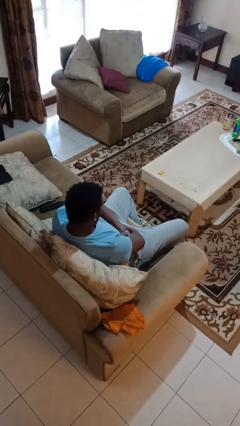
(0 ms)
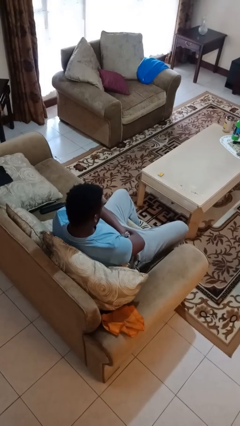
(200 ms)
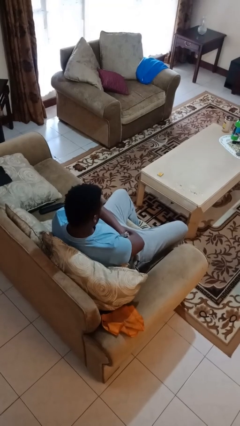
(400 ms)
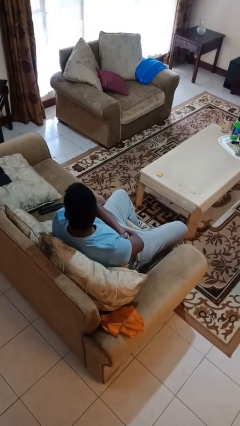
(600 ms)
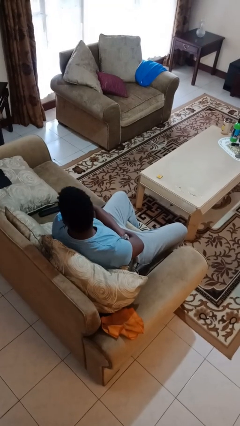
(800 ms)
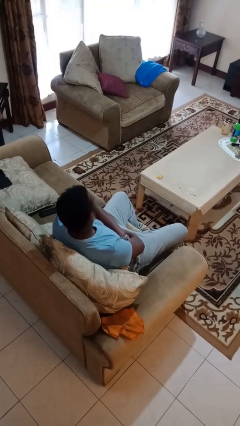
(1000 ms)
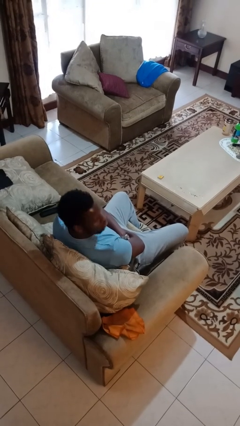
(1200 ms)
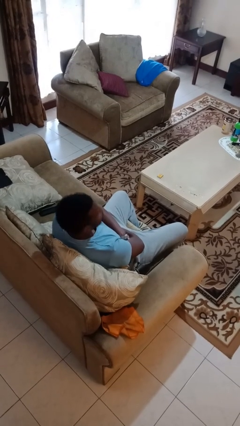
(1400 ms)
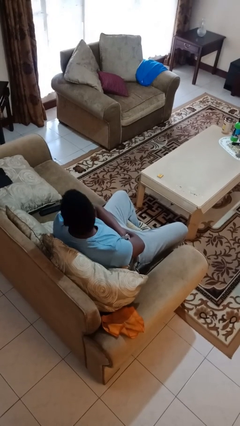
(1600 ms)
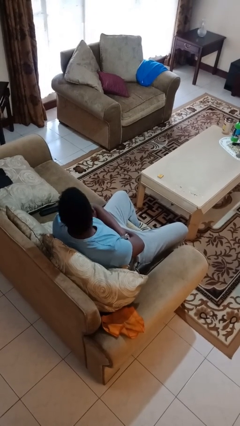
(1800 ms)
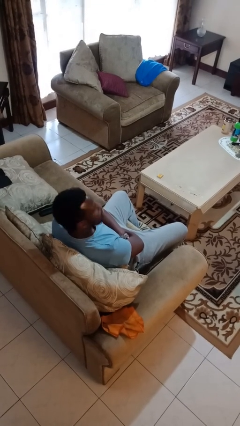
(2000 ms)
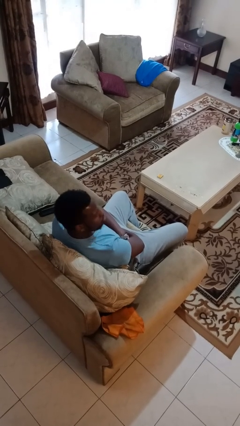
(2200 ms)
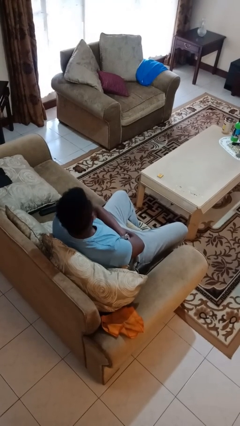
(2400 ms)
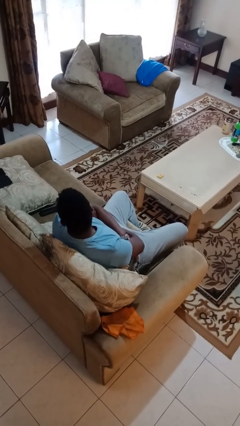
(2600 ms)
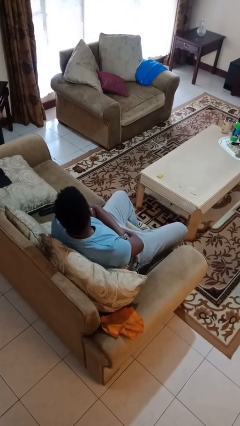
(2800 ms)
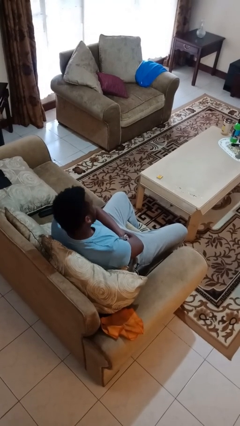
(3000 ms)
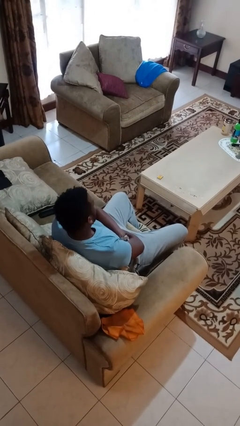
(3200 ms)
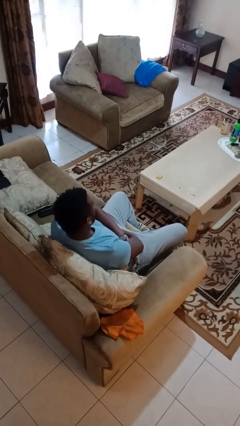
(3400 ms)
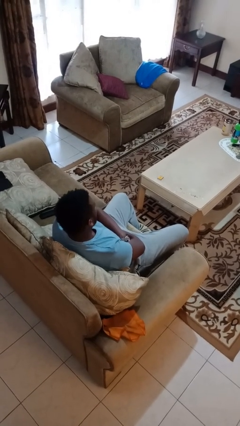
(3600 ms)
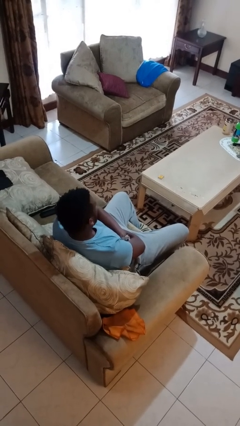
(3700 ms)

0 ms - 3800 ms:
person shakes head

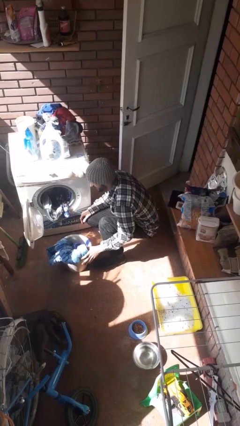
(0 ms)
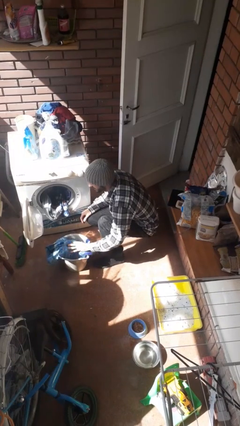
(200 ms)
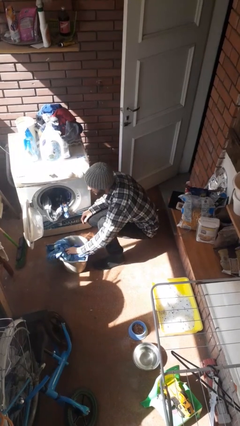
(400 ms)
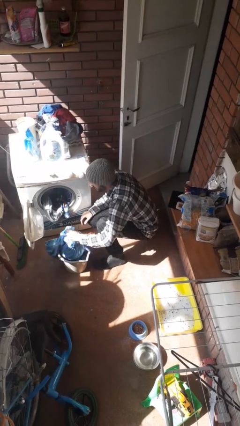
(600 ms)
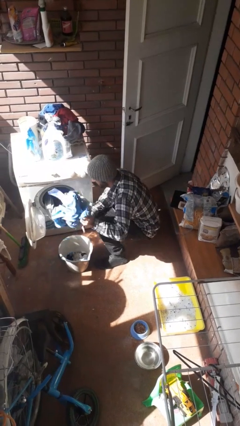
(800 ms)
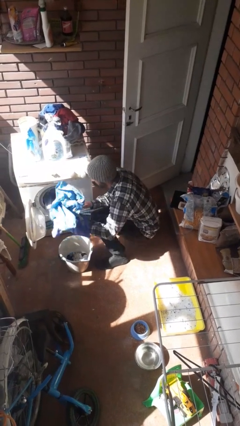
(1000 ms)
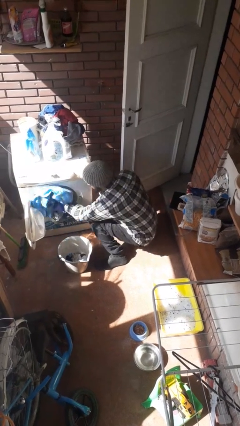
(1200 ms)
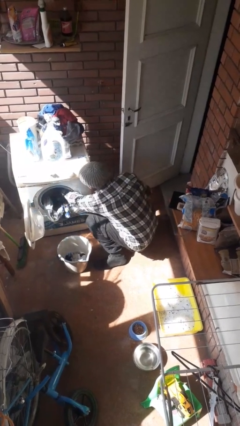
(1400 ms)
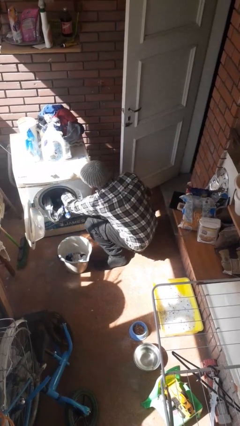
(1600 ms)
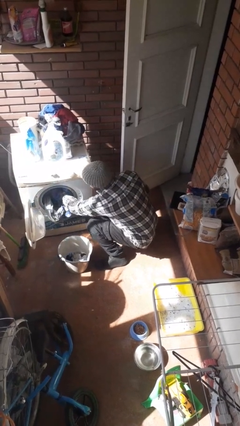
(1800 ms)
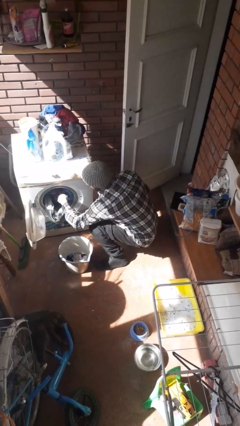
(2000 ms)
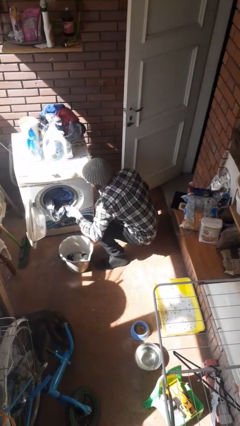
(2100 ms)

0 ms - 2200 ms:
person loads clotheswasher

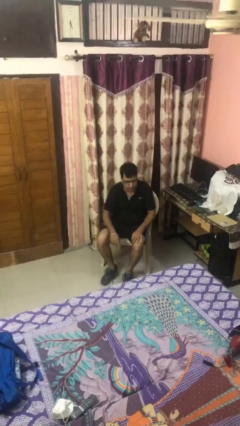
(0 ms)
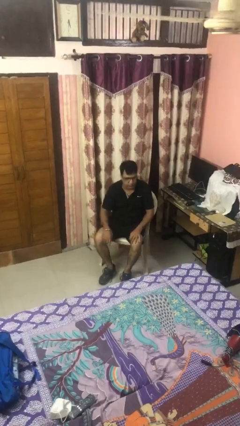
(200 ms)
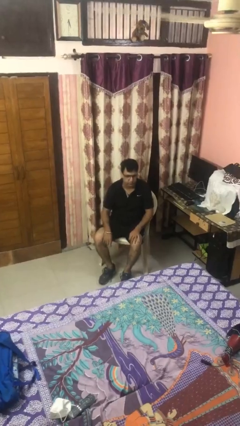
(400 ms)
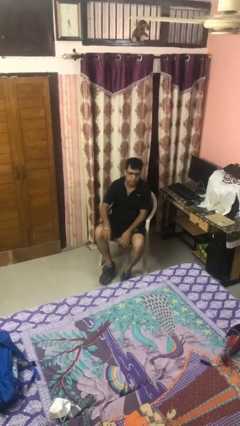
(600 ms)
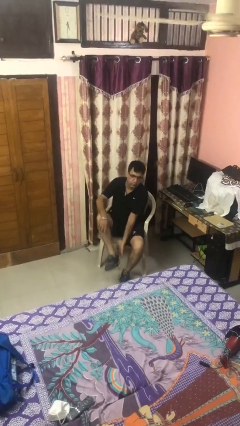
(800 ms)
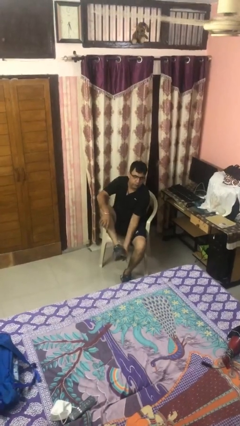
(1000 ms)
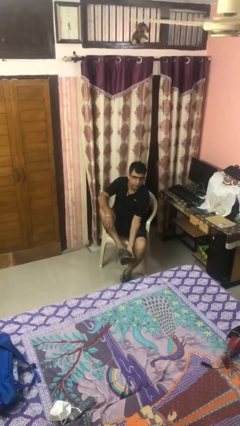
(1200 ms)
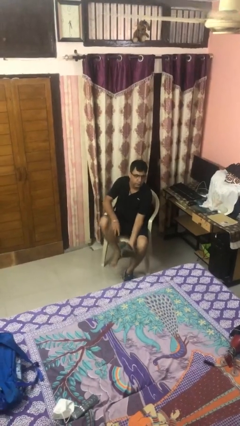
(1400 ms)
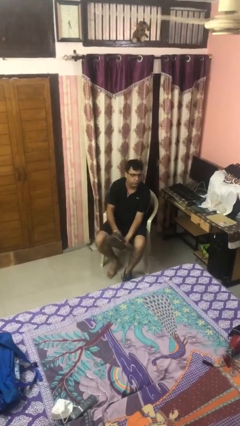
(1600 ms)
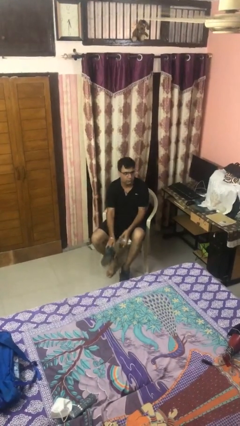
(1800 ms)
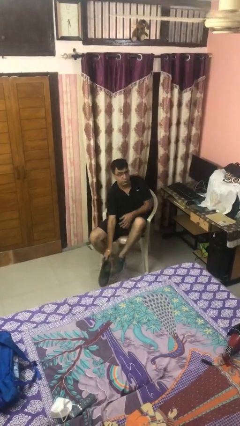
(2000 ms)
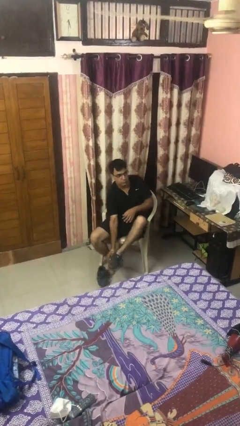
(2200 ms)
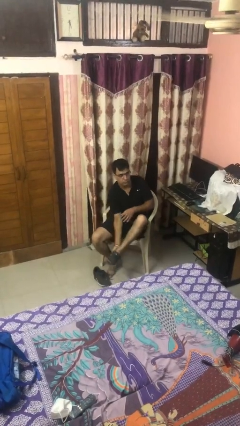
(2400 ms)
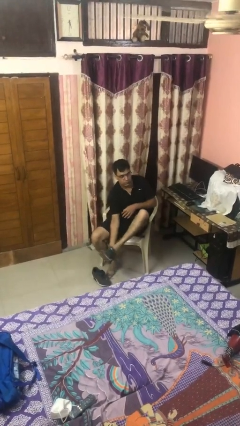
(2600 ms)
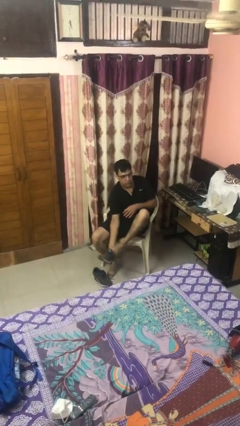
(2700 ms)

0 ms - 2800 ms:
person takes off shoes

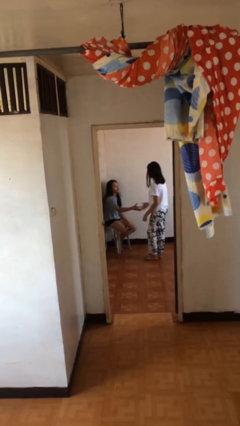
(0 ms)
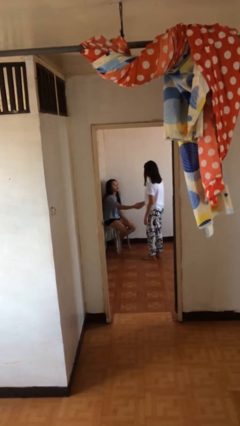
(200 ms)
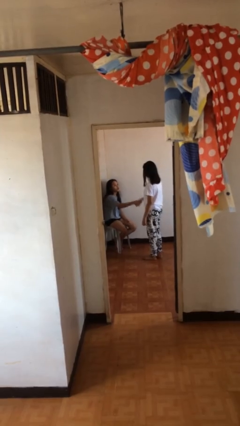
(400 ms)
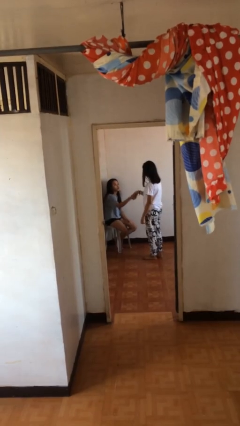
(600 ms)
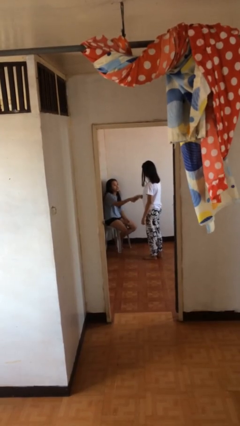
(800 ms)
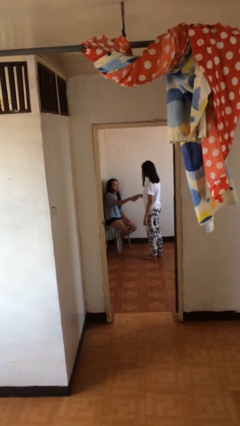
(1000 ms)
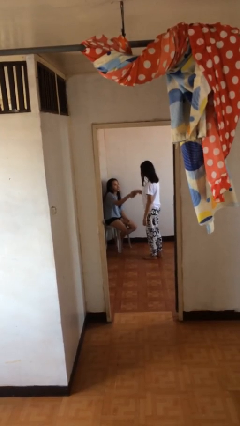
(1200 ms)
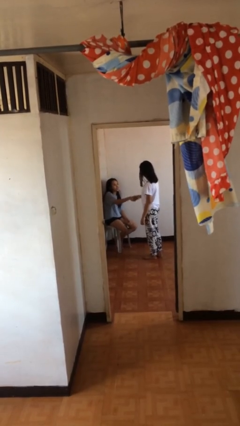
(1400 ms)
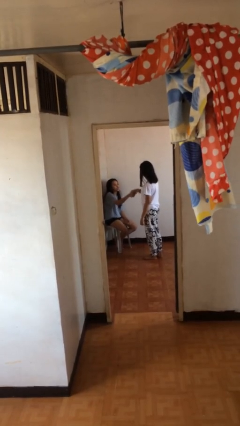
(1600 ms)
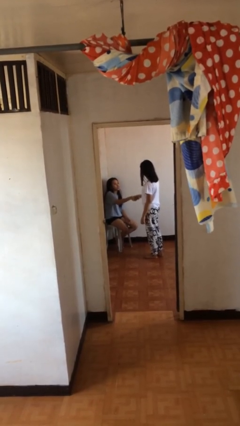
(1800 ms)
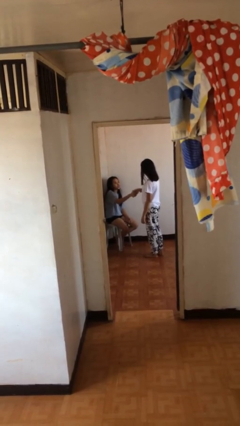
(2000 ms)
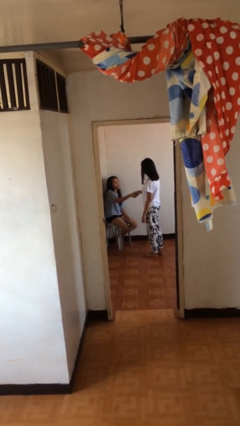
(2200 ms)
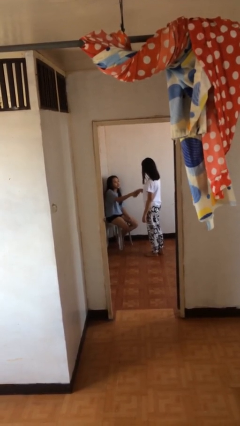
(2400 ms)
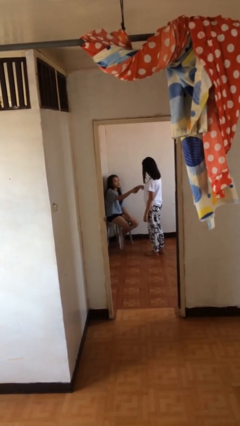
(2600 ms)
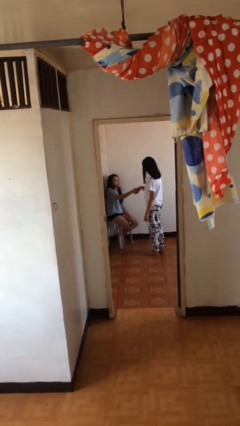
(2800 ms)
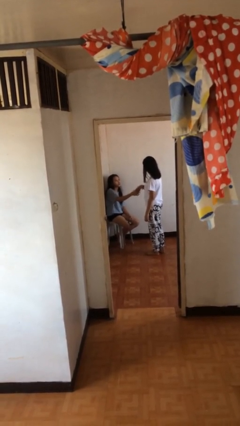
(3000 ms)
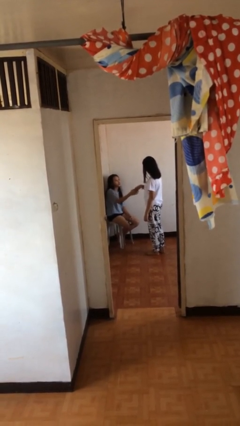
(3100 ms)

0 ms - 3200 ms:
person shakes hand

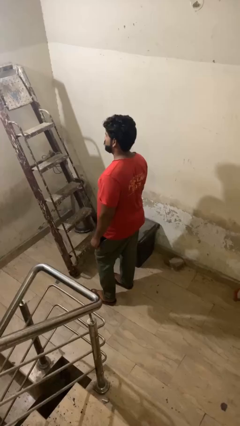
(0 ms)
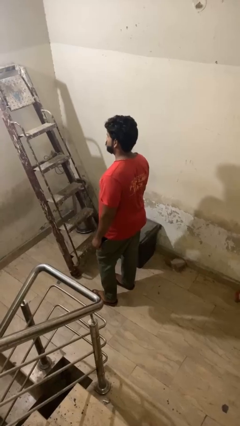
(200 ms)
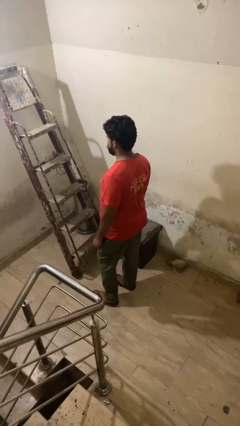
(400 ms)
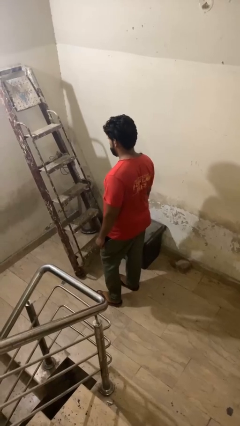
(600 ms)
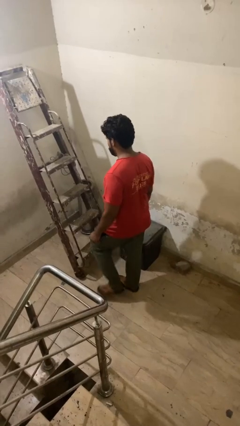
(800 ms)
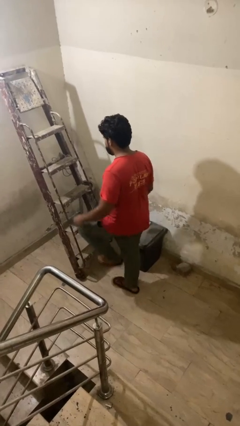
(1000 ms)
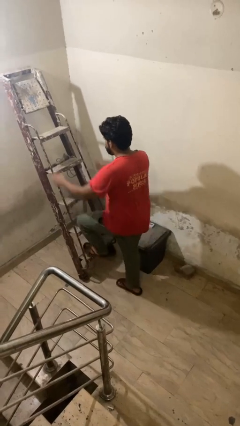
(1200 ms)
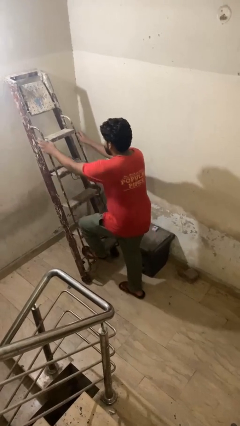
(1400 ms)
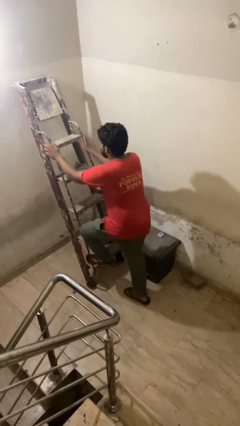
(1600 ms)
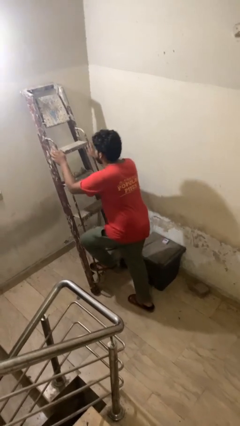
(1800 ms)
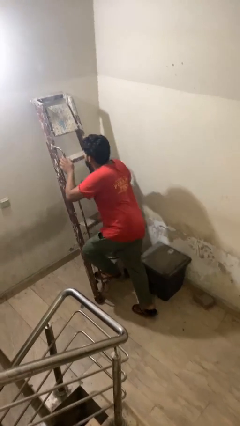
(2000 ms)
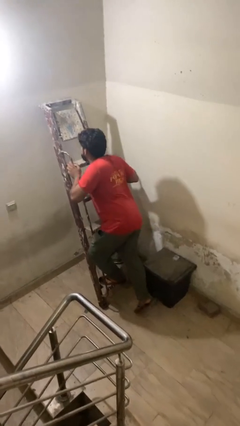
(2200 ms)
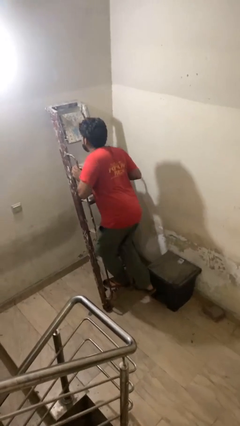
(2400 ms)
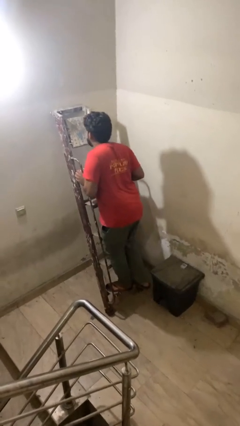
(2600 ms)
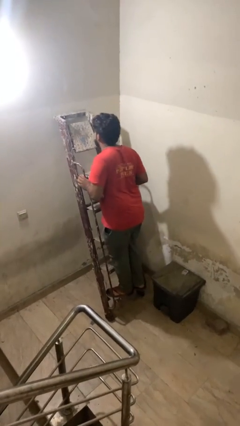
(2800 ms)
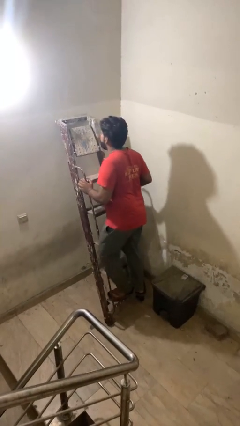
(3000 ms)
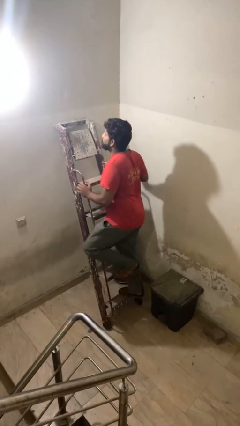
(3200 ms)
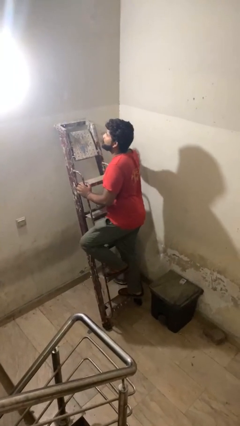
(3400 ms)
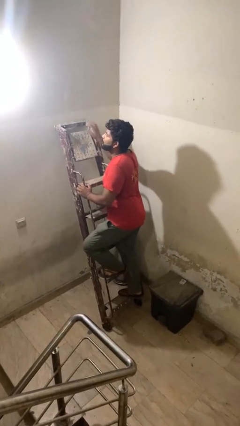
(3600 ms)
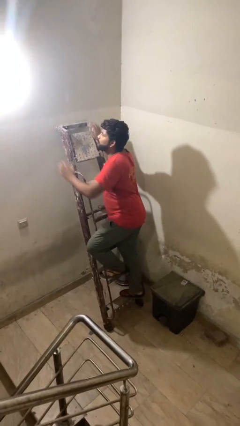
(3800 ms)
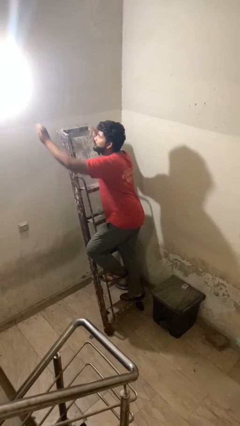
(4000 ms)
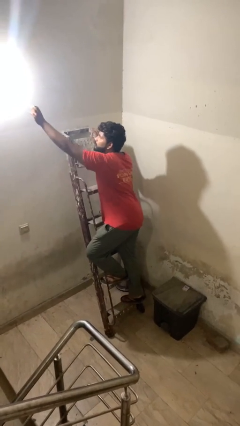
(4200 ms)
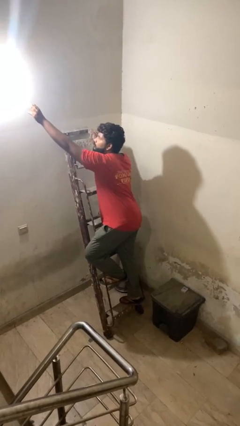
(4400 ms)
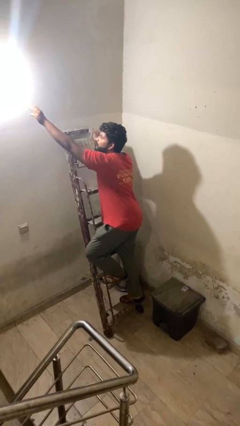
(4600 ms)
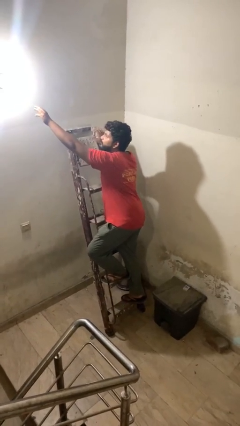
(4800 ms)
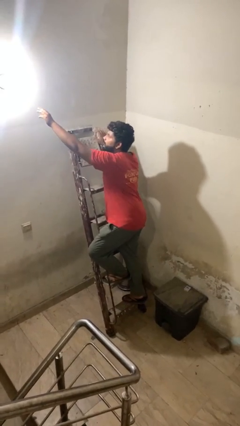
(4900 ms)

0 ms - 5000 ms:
person climbs up ladder

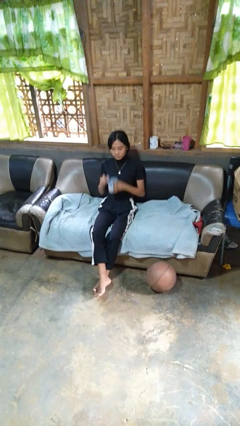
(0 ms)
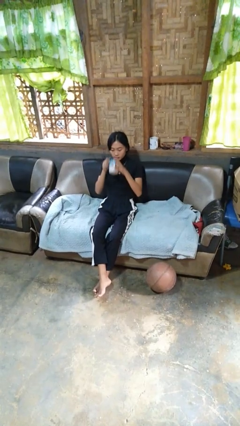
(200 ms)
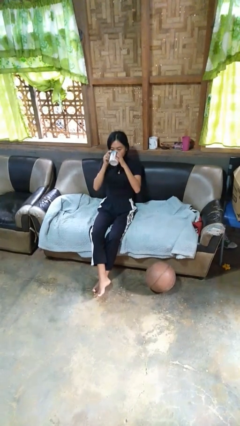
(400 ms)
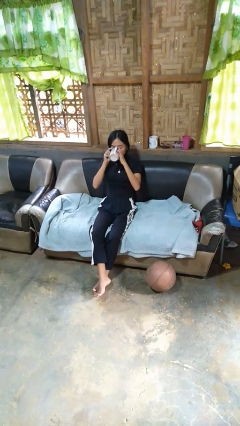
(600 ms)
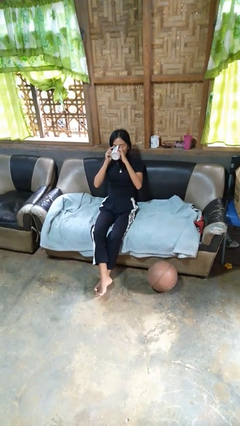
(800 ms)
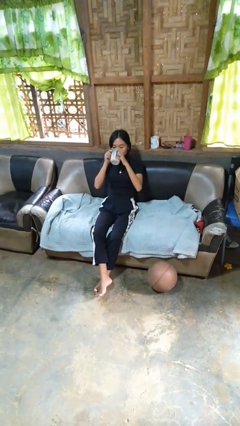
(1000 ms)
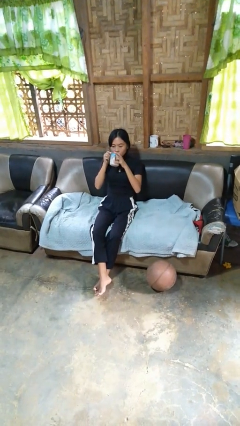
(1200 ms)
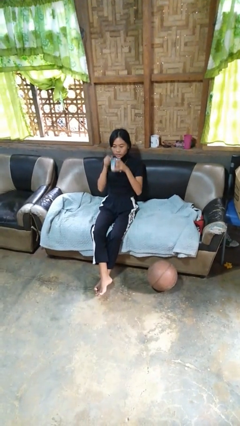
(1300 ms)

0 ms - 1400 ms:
person drinks from mug
